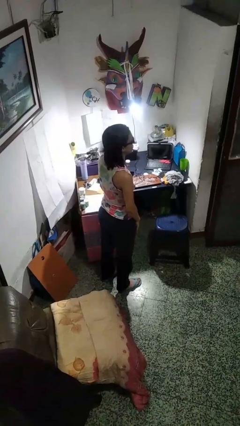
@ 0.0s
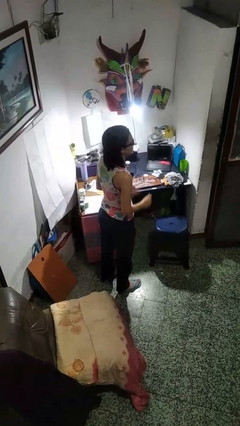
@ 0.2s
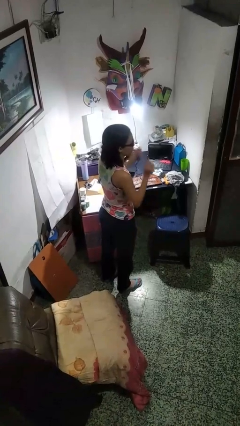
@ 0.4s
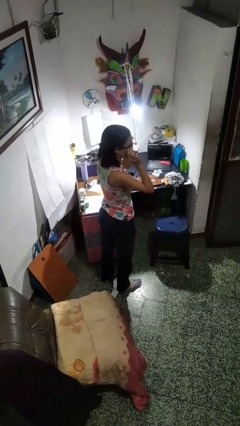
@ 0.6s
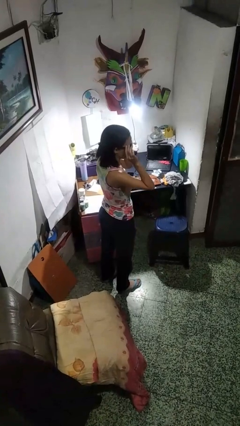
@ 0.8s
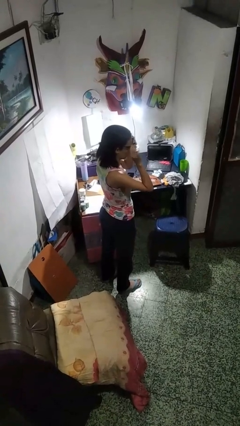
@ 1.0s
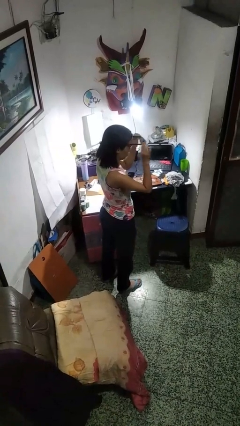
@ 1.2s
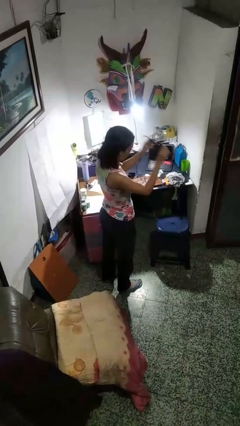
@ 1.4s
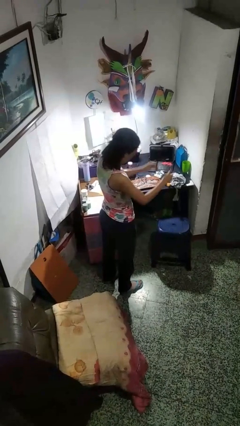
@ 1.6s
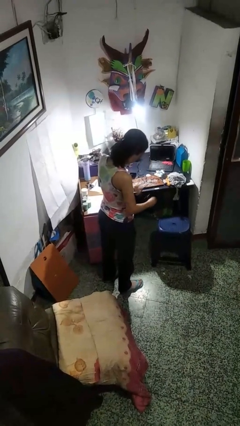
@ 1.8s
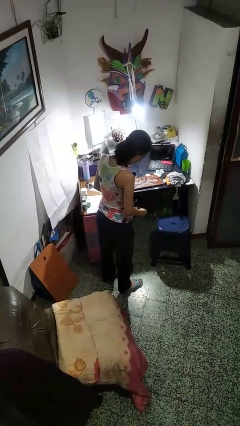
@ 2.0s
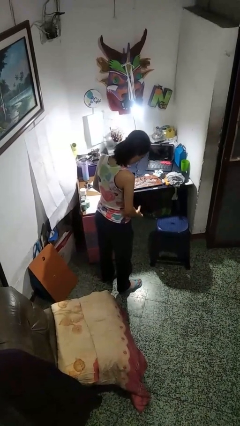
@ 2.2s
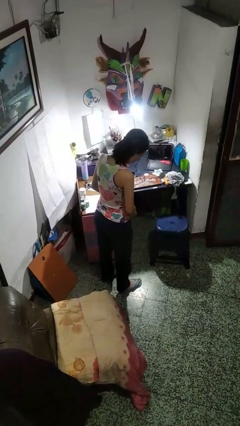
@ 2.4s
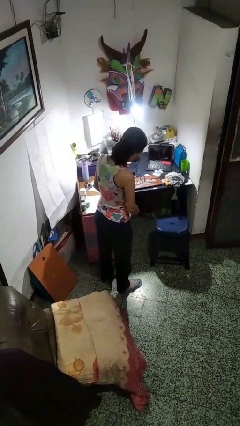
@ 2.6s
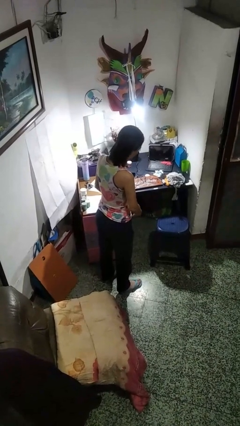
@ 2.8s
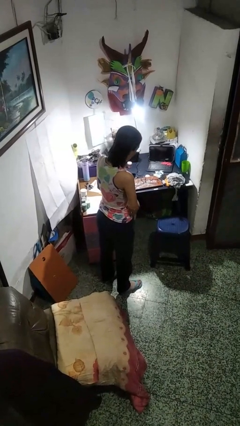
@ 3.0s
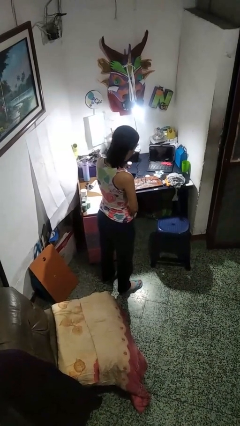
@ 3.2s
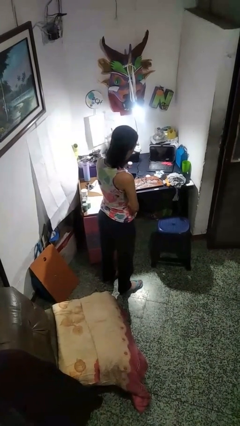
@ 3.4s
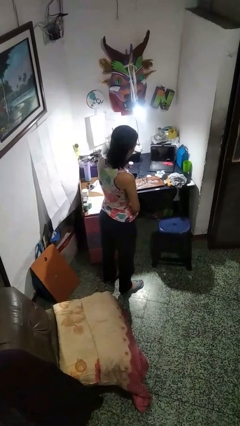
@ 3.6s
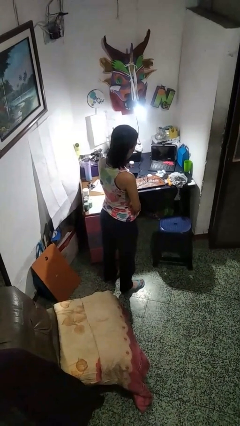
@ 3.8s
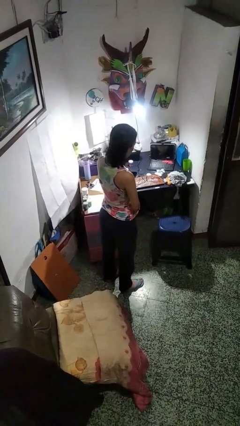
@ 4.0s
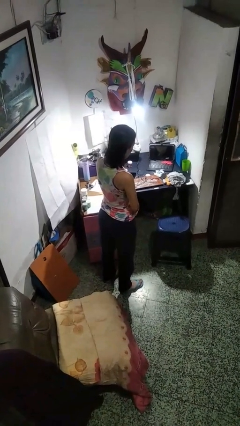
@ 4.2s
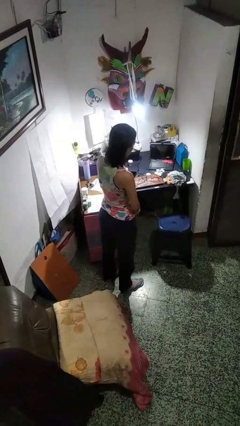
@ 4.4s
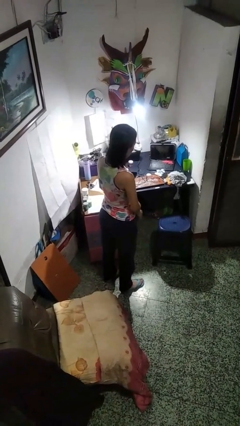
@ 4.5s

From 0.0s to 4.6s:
person takes off sunglasses

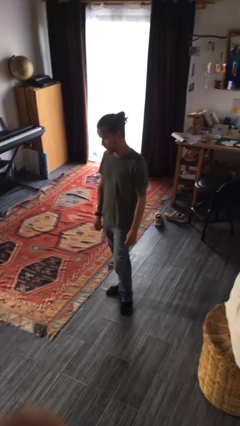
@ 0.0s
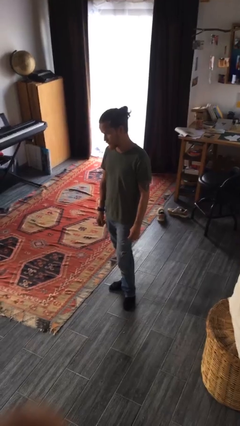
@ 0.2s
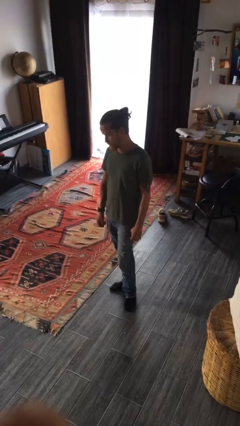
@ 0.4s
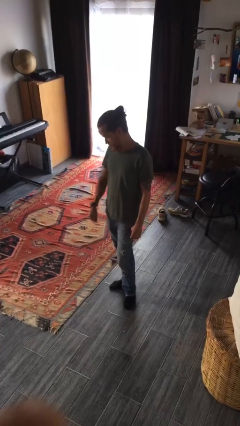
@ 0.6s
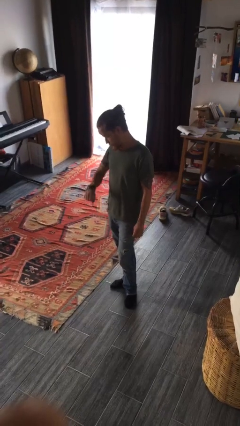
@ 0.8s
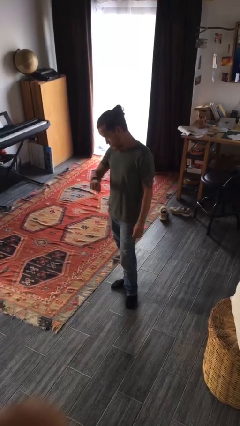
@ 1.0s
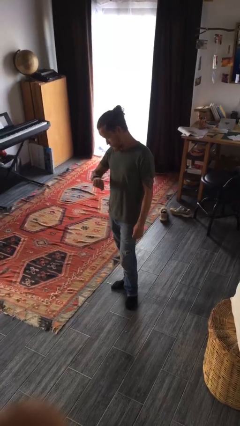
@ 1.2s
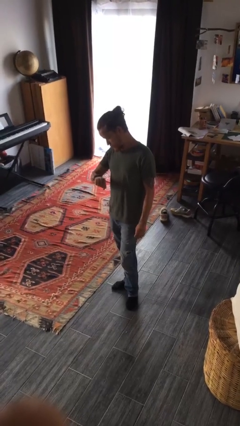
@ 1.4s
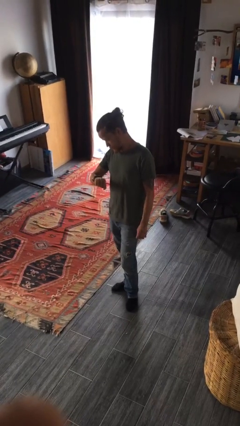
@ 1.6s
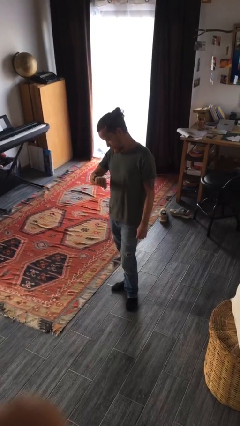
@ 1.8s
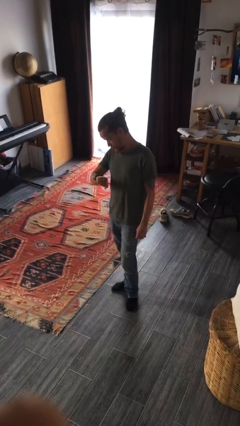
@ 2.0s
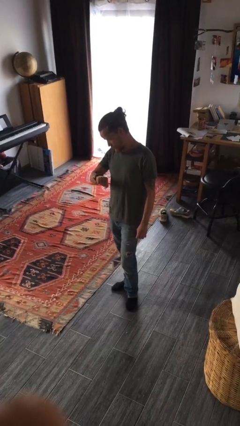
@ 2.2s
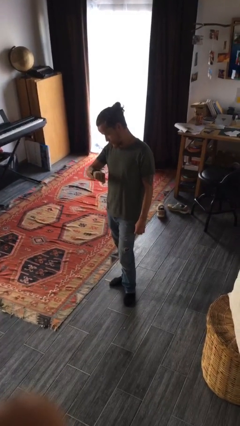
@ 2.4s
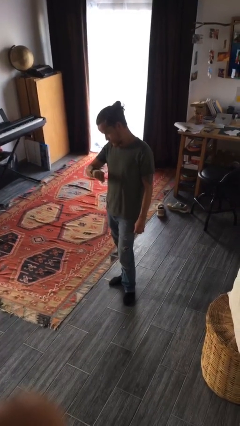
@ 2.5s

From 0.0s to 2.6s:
person looks at wristwatch

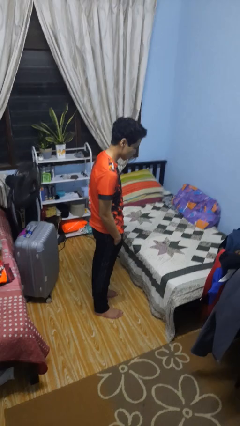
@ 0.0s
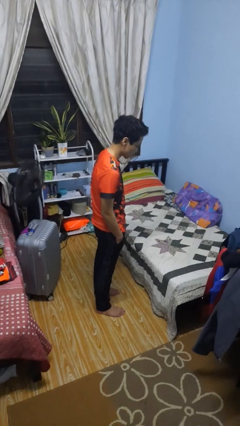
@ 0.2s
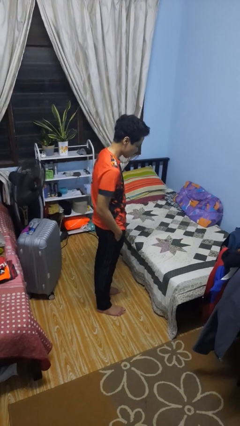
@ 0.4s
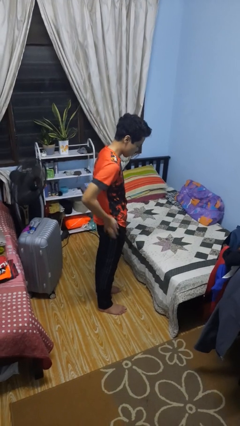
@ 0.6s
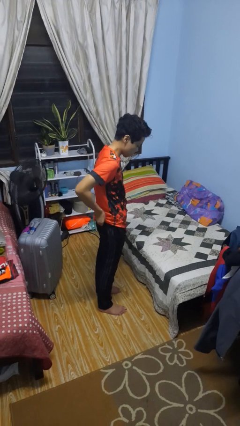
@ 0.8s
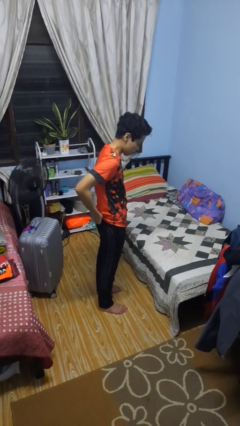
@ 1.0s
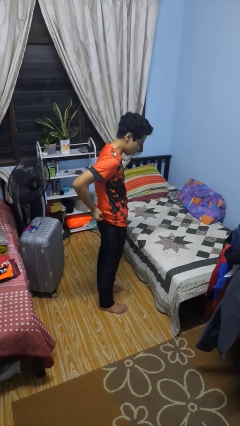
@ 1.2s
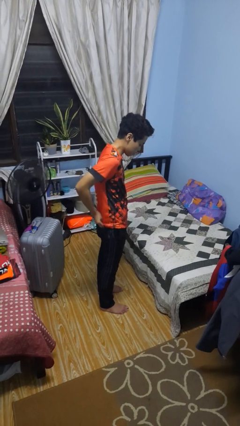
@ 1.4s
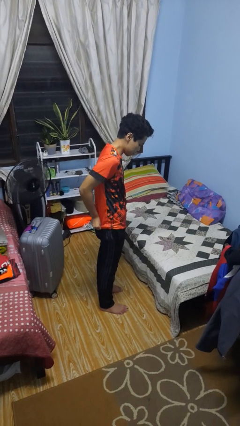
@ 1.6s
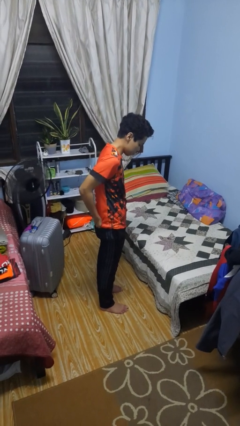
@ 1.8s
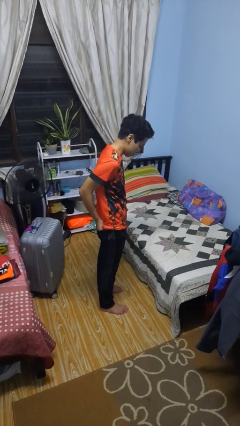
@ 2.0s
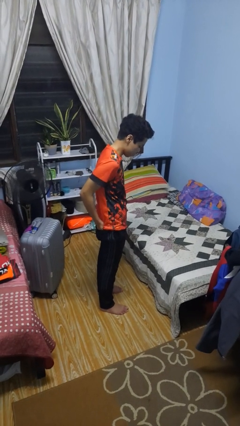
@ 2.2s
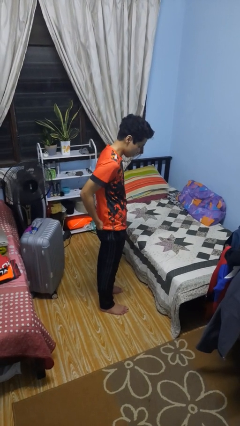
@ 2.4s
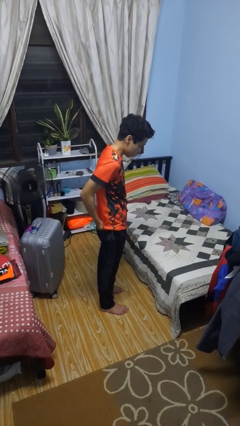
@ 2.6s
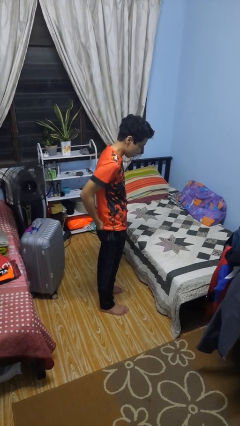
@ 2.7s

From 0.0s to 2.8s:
person puts hands in back pockets

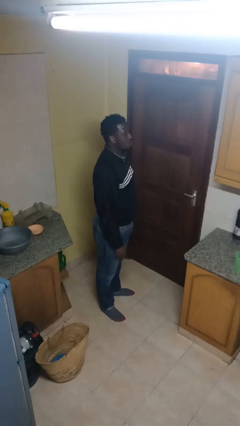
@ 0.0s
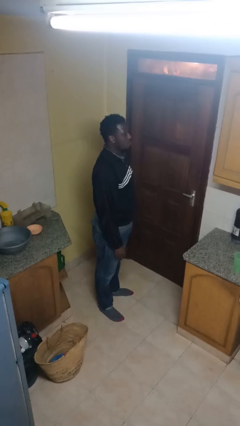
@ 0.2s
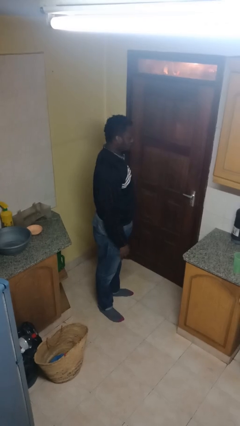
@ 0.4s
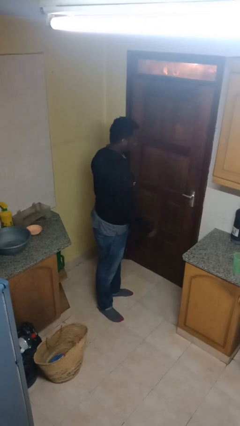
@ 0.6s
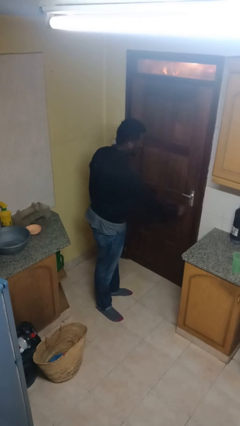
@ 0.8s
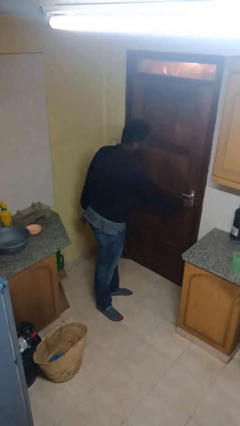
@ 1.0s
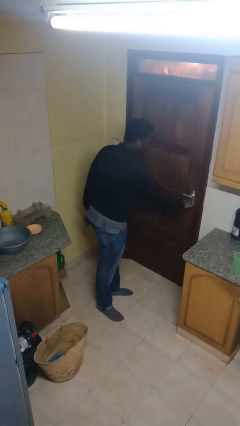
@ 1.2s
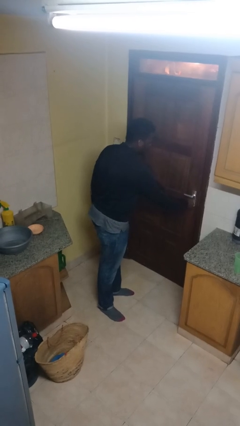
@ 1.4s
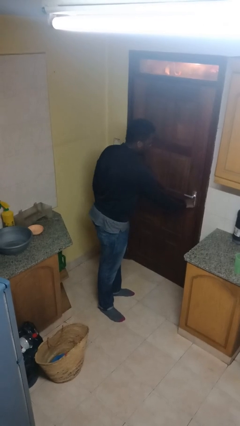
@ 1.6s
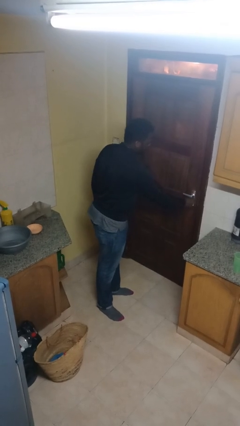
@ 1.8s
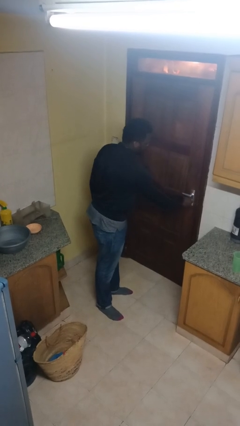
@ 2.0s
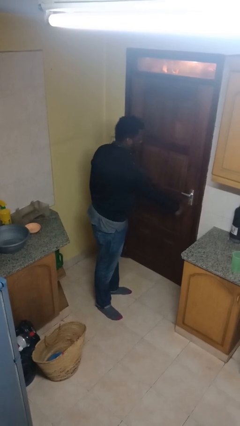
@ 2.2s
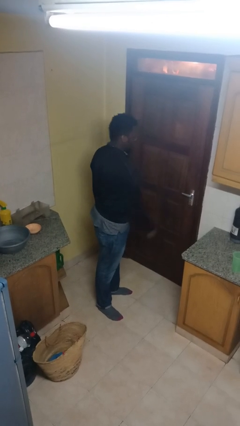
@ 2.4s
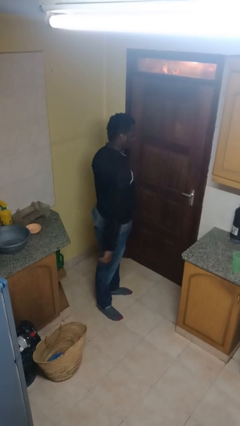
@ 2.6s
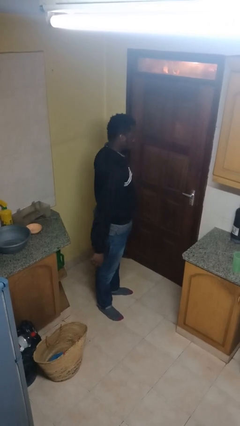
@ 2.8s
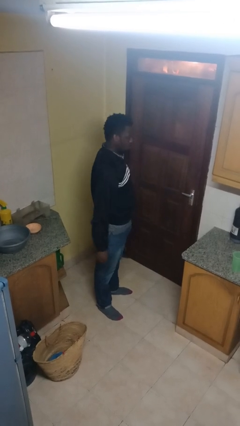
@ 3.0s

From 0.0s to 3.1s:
person unlocks door with keys

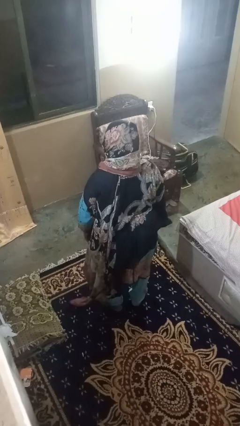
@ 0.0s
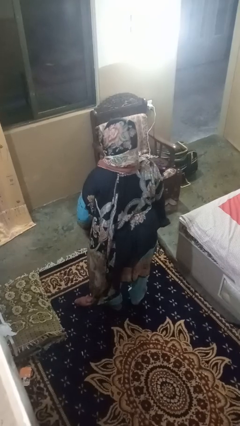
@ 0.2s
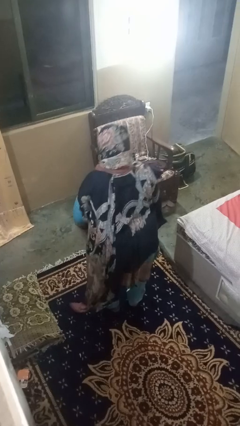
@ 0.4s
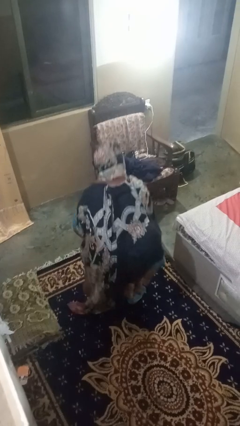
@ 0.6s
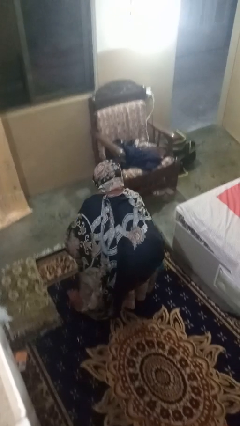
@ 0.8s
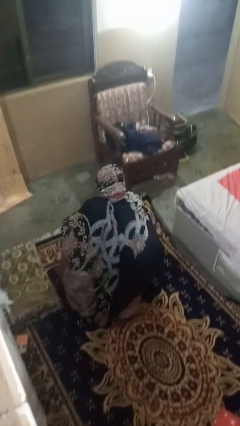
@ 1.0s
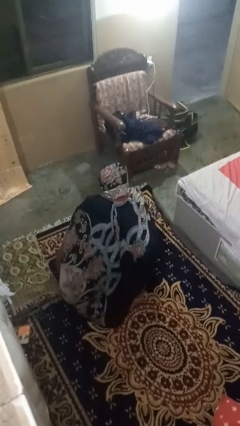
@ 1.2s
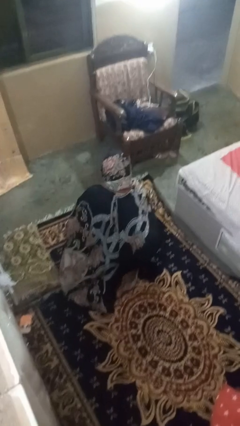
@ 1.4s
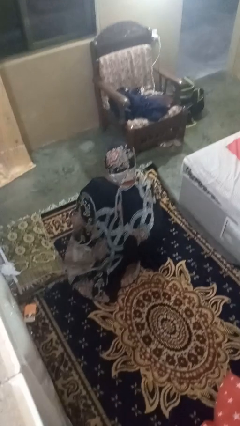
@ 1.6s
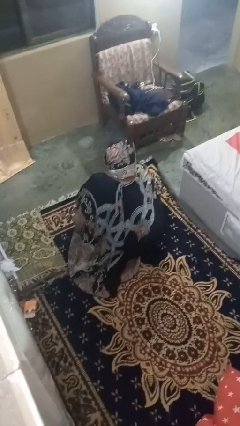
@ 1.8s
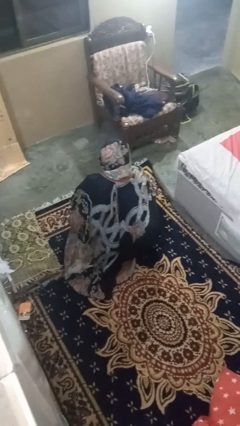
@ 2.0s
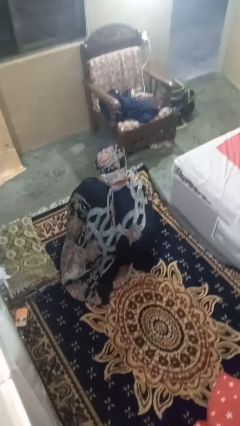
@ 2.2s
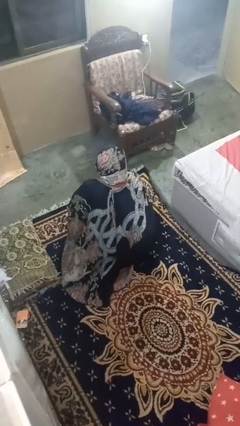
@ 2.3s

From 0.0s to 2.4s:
person squats

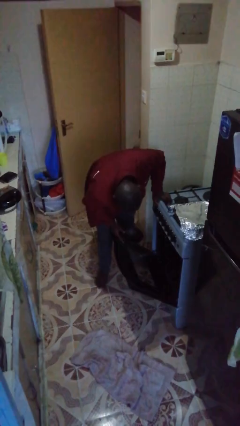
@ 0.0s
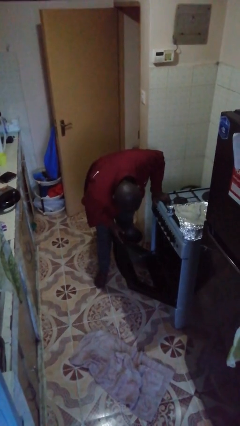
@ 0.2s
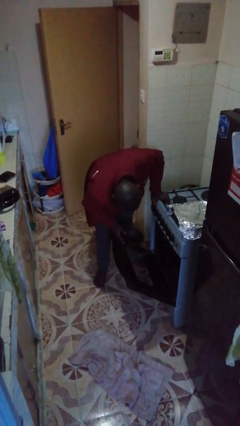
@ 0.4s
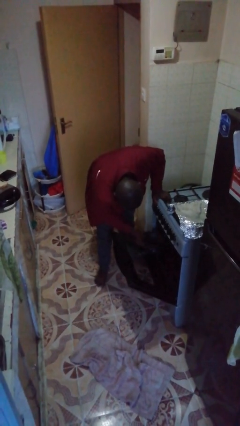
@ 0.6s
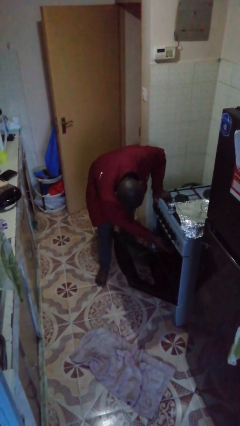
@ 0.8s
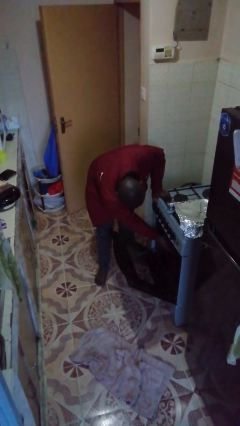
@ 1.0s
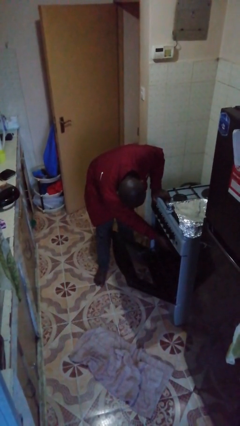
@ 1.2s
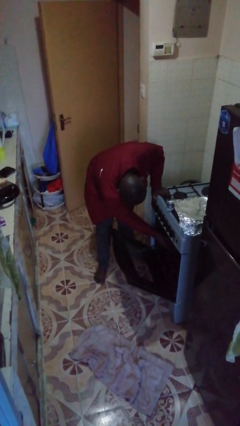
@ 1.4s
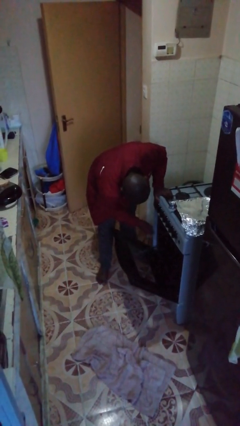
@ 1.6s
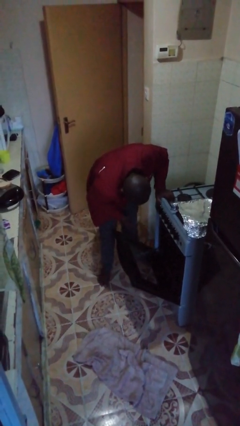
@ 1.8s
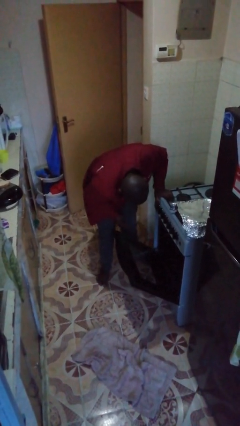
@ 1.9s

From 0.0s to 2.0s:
person puts object into oven
